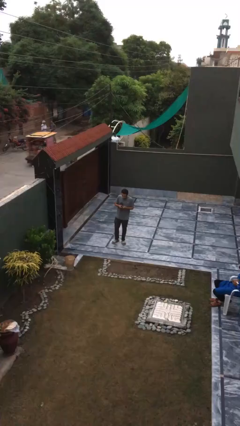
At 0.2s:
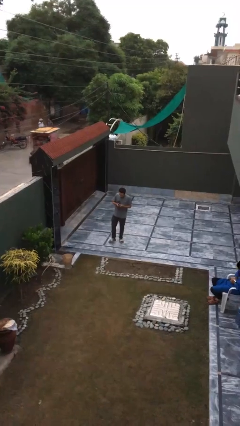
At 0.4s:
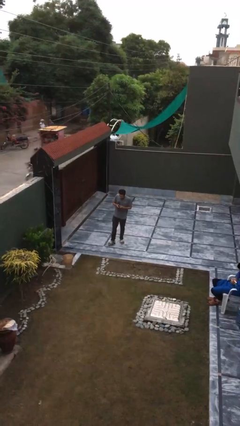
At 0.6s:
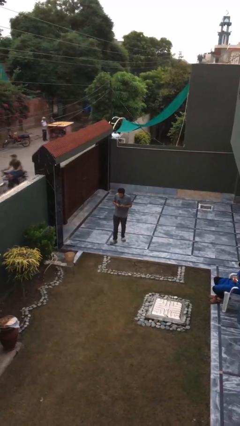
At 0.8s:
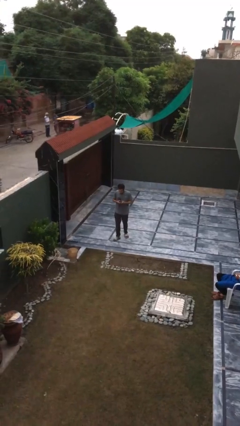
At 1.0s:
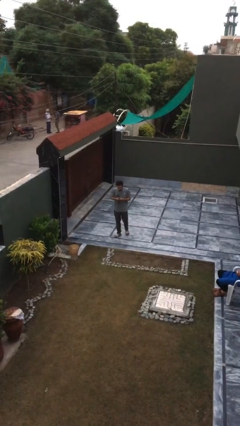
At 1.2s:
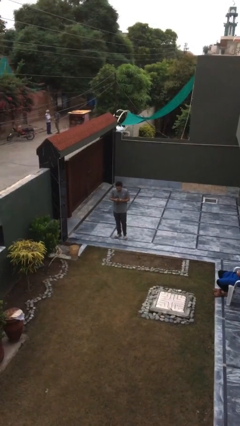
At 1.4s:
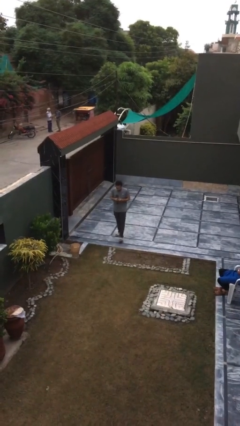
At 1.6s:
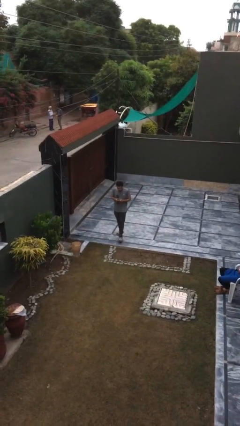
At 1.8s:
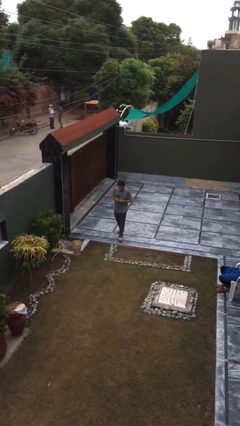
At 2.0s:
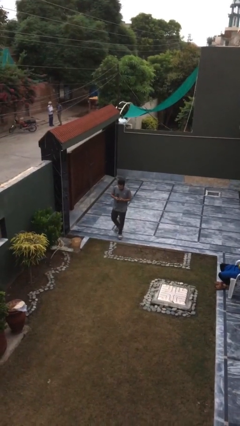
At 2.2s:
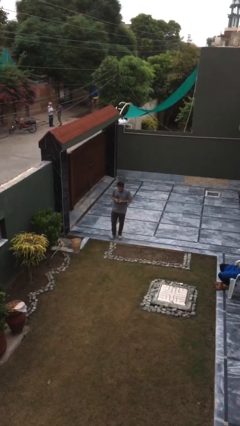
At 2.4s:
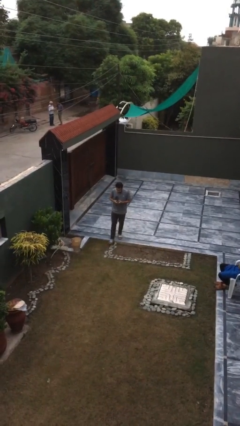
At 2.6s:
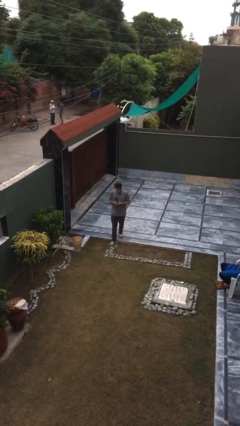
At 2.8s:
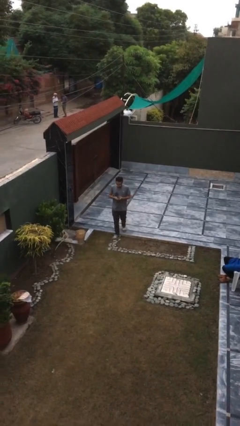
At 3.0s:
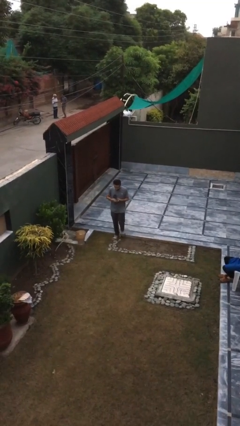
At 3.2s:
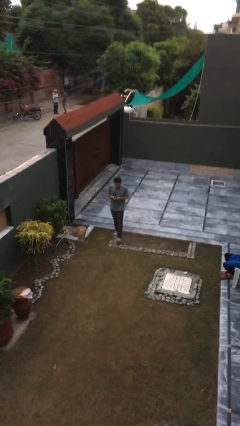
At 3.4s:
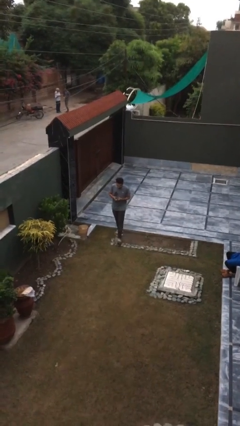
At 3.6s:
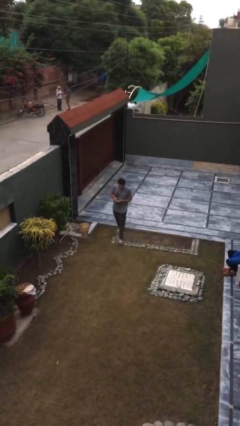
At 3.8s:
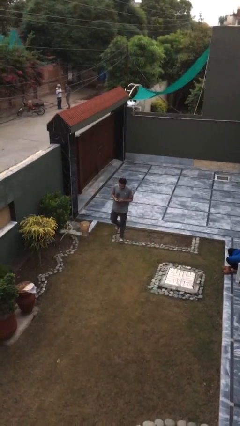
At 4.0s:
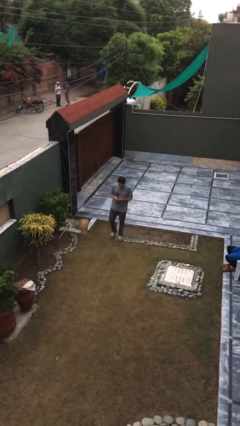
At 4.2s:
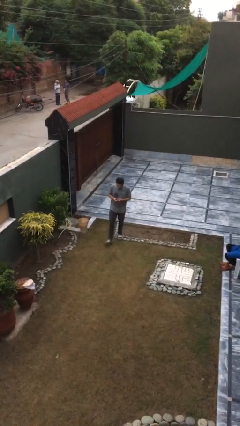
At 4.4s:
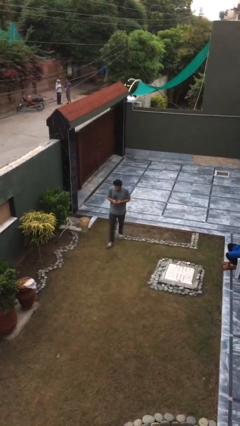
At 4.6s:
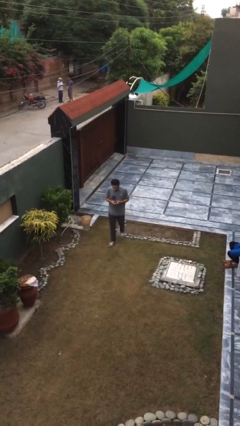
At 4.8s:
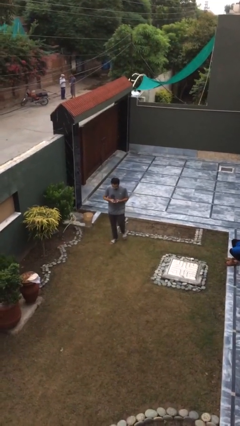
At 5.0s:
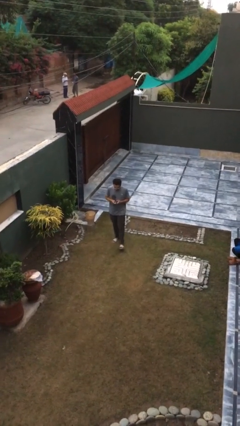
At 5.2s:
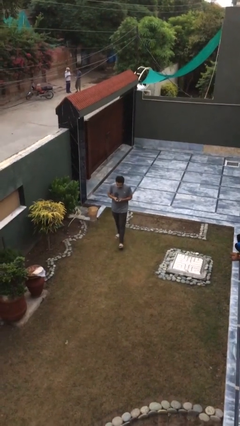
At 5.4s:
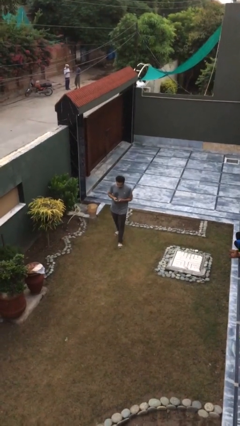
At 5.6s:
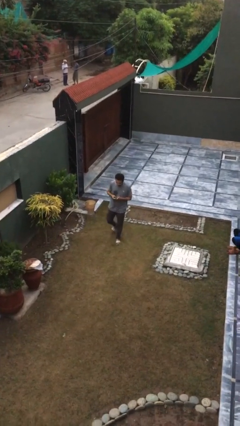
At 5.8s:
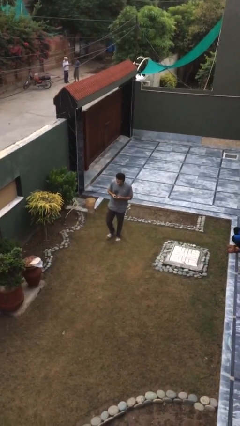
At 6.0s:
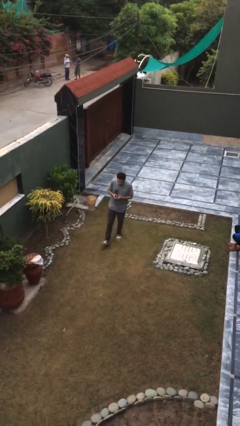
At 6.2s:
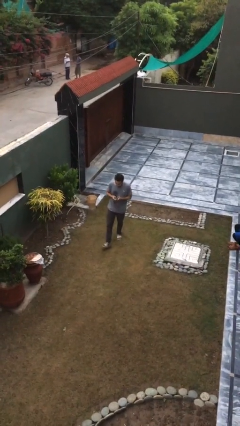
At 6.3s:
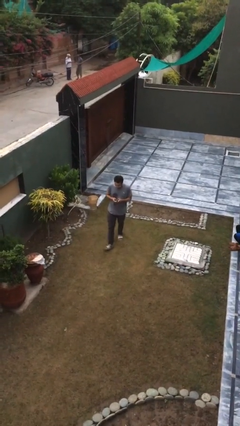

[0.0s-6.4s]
person texts on phone

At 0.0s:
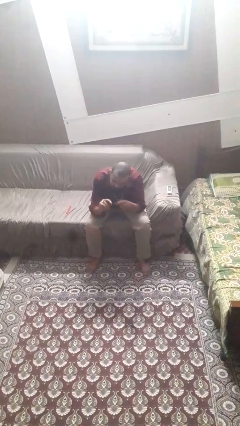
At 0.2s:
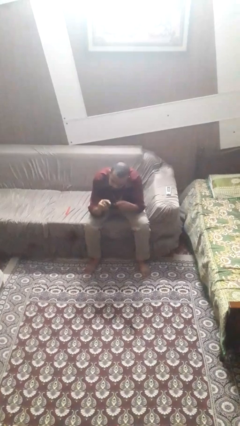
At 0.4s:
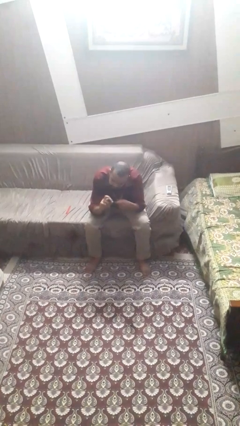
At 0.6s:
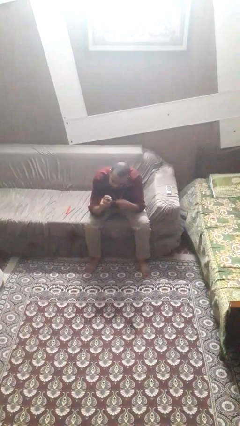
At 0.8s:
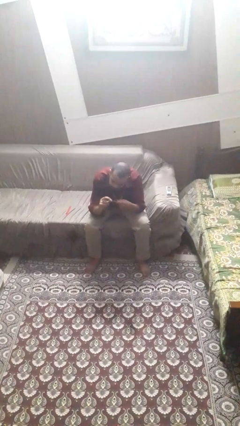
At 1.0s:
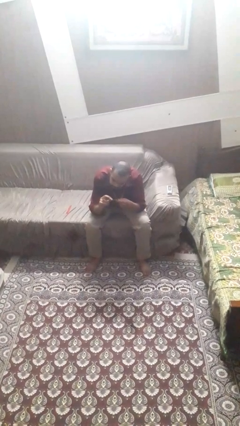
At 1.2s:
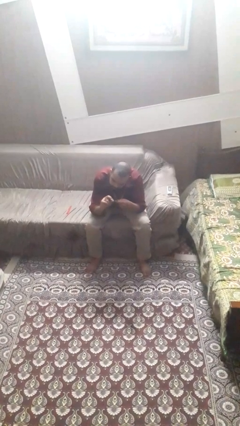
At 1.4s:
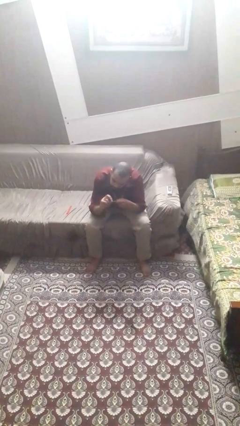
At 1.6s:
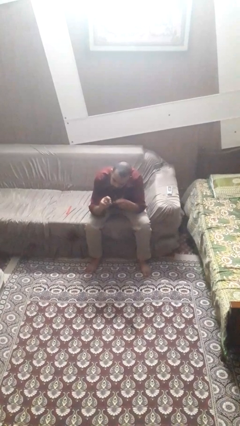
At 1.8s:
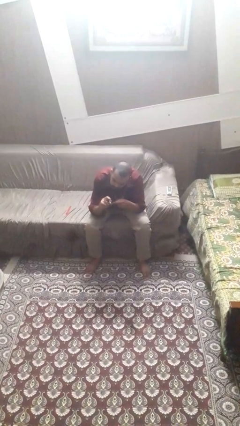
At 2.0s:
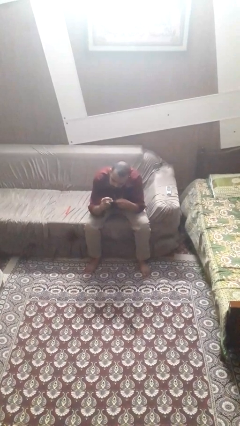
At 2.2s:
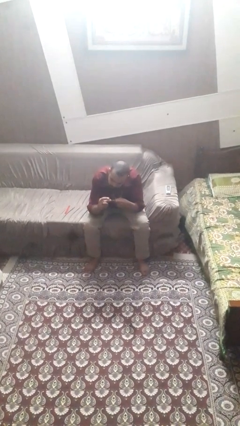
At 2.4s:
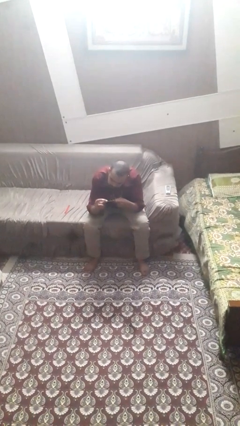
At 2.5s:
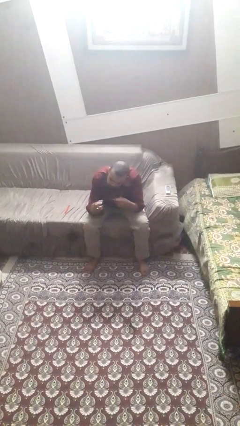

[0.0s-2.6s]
person files fingernails

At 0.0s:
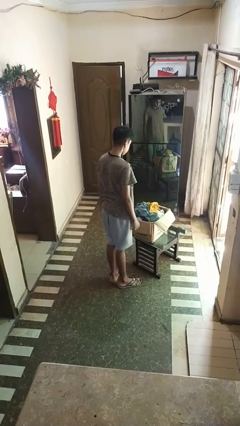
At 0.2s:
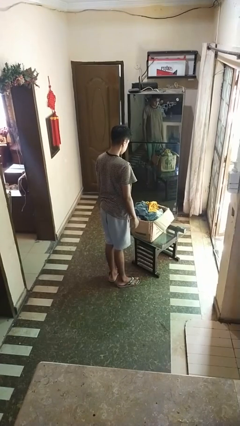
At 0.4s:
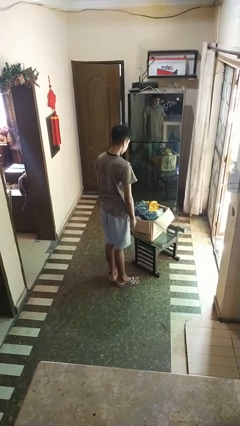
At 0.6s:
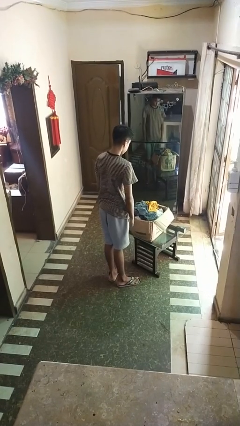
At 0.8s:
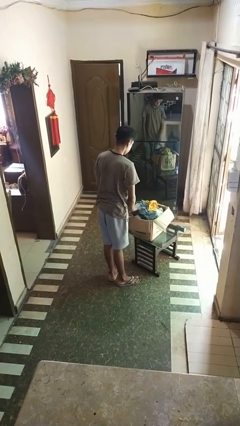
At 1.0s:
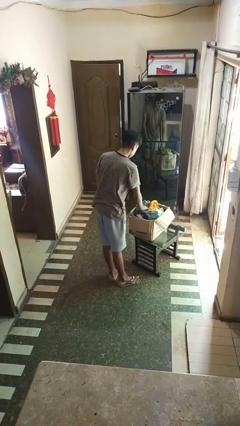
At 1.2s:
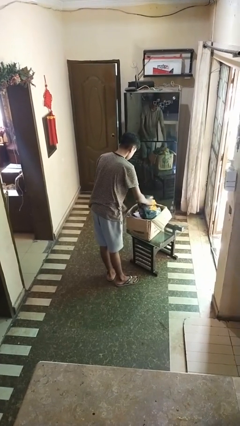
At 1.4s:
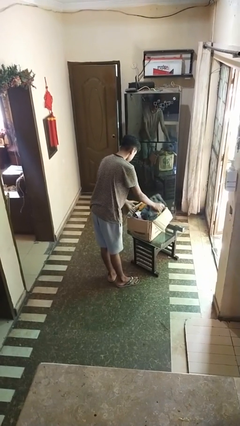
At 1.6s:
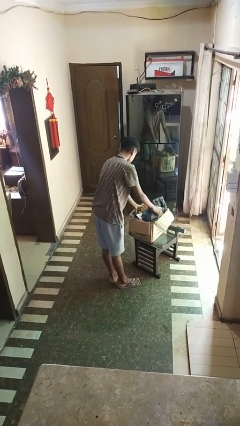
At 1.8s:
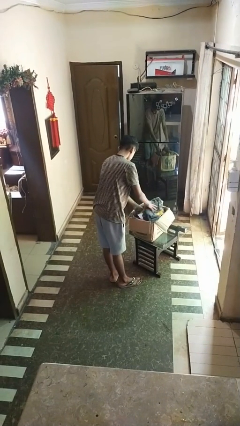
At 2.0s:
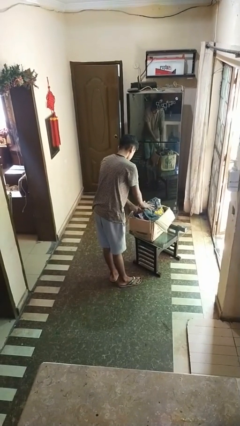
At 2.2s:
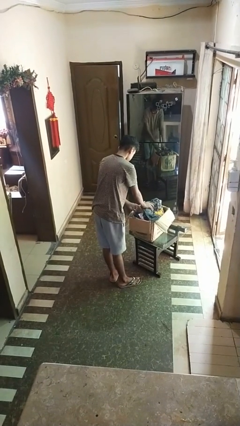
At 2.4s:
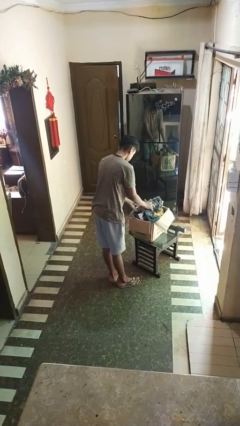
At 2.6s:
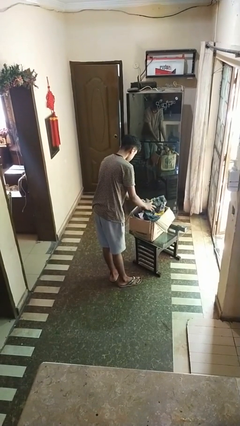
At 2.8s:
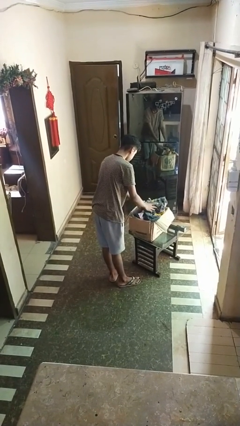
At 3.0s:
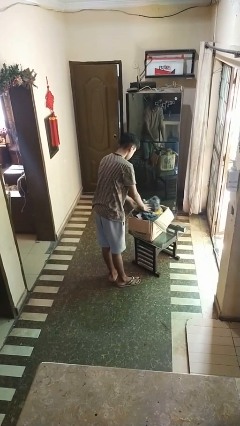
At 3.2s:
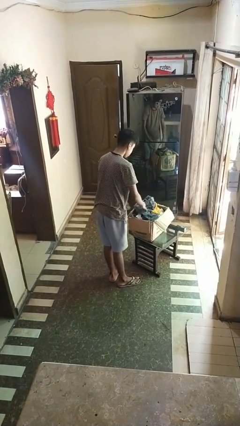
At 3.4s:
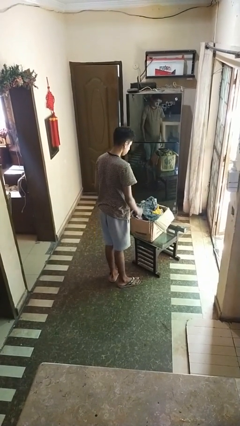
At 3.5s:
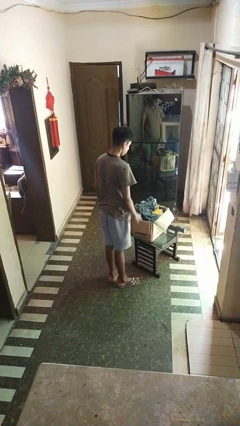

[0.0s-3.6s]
person searches in box

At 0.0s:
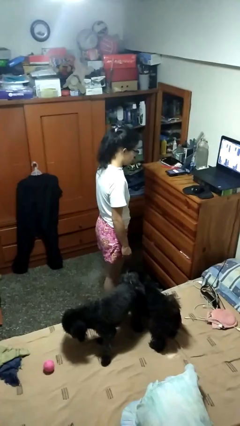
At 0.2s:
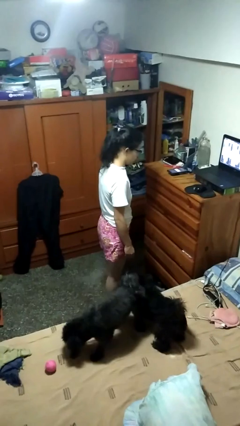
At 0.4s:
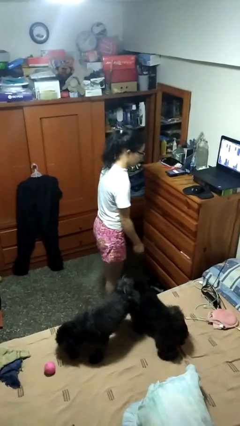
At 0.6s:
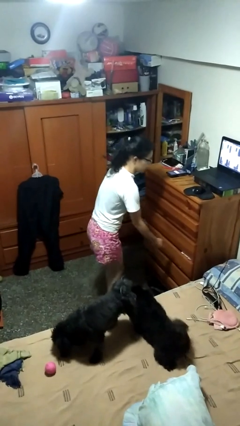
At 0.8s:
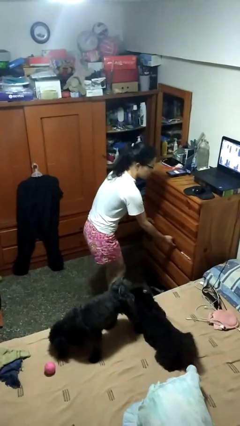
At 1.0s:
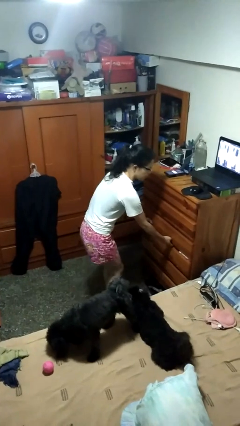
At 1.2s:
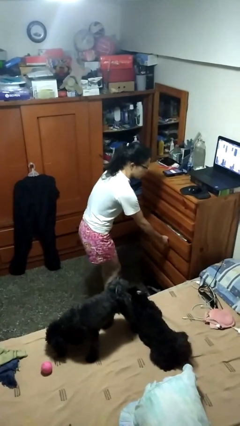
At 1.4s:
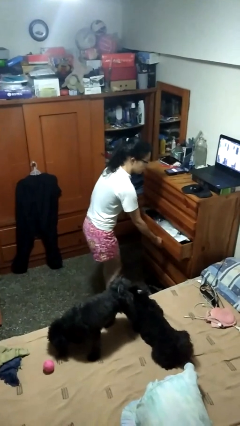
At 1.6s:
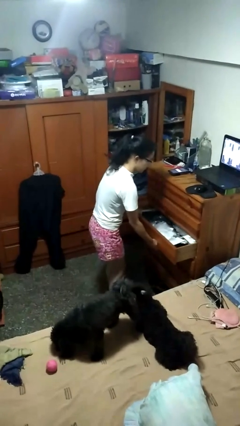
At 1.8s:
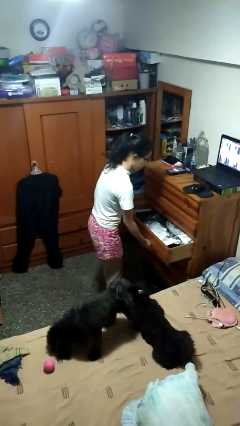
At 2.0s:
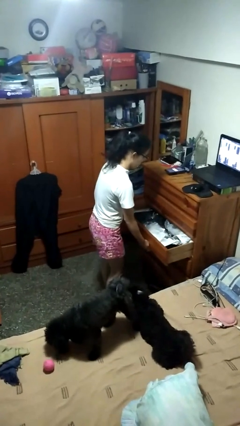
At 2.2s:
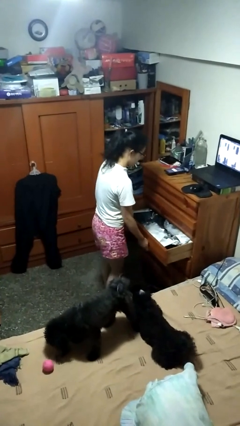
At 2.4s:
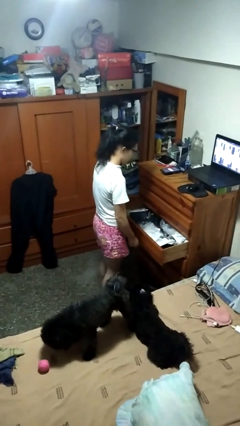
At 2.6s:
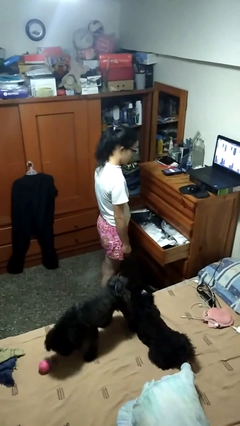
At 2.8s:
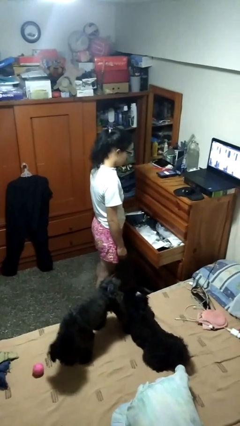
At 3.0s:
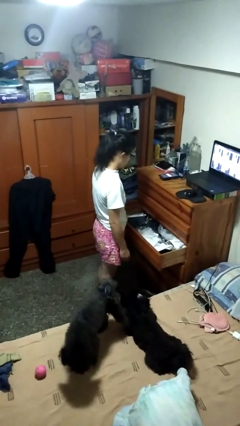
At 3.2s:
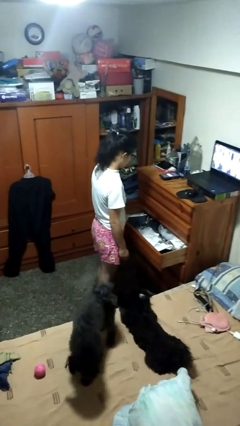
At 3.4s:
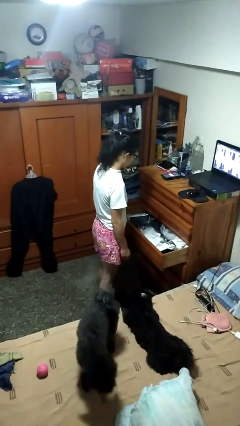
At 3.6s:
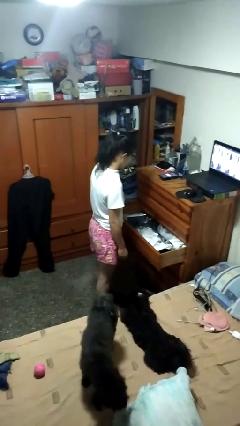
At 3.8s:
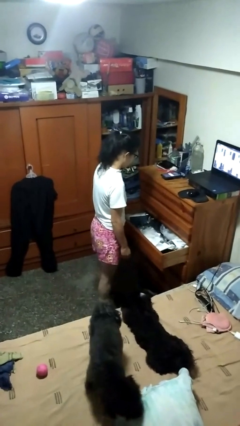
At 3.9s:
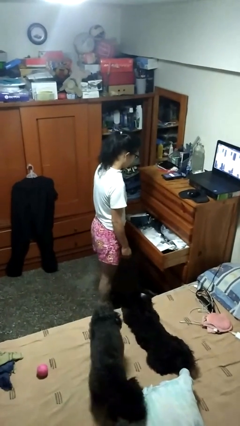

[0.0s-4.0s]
person opens dresser drawer

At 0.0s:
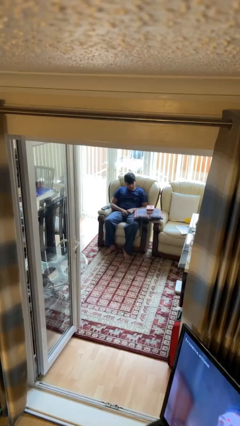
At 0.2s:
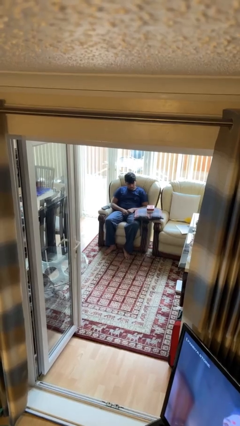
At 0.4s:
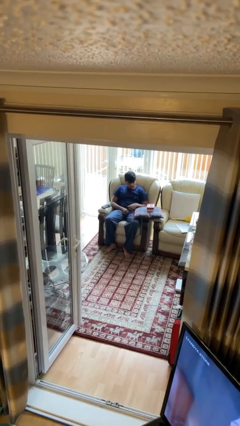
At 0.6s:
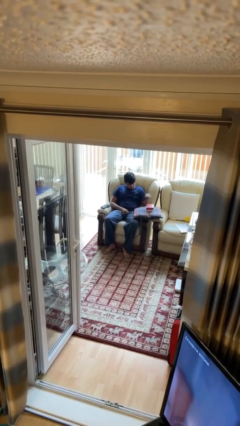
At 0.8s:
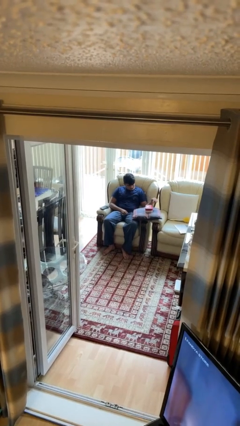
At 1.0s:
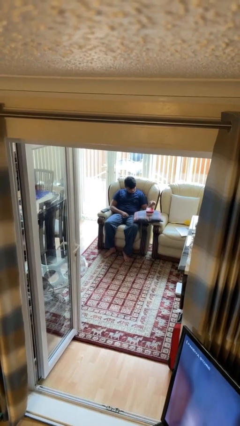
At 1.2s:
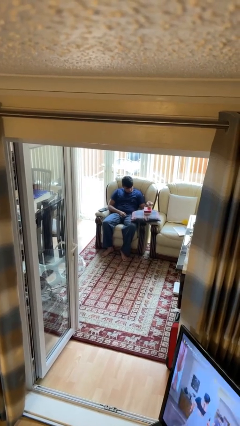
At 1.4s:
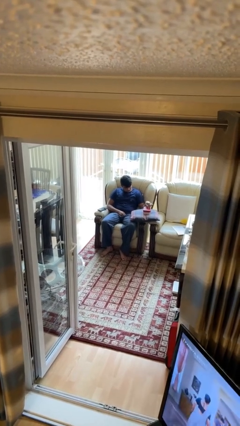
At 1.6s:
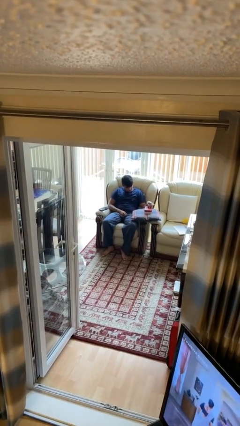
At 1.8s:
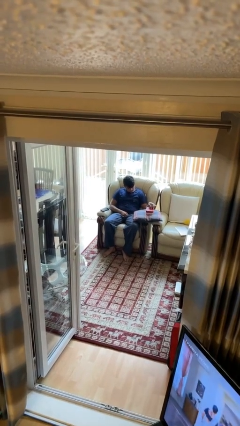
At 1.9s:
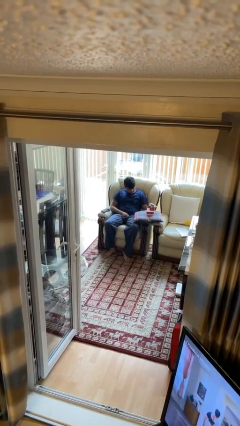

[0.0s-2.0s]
person taps object with finger
